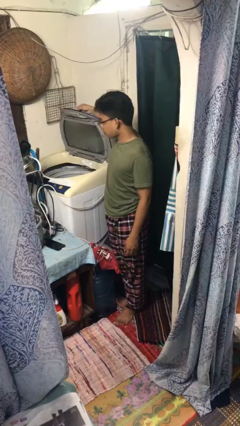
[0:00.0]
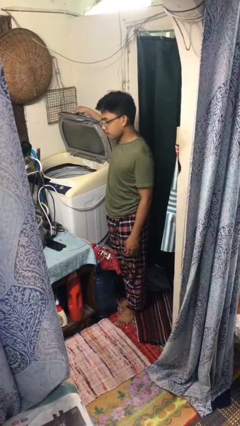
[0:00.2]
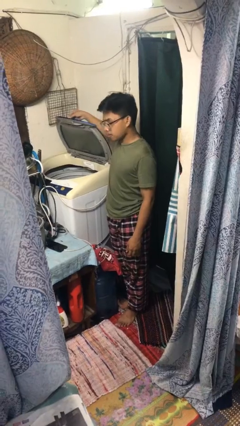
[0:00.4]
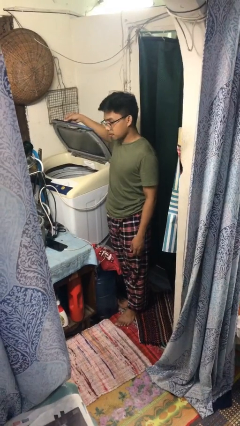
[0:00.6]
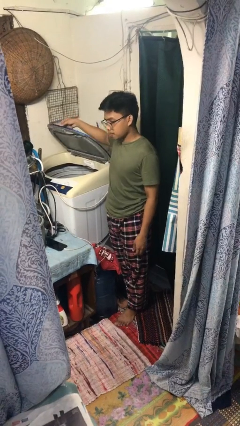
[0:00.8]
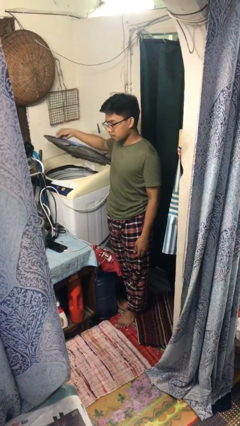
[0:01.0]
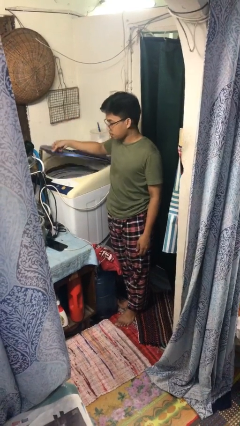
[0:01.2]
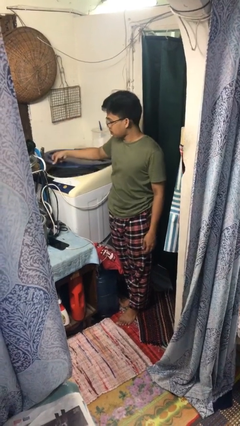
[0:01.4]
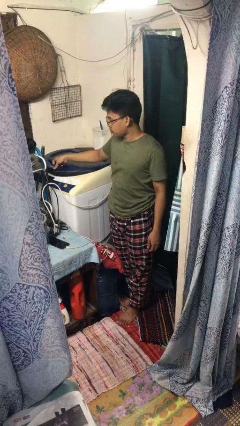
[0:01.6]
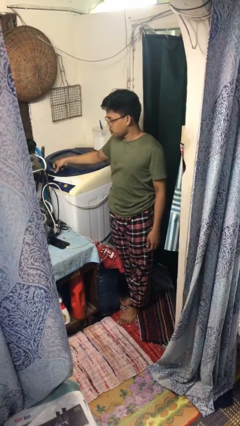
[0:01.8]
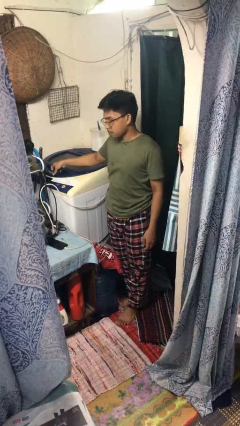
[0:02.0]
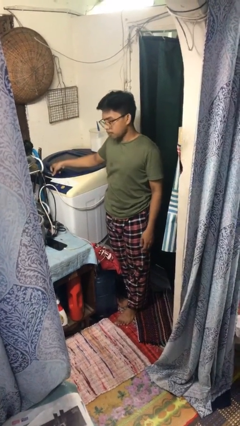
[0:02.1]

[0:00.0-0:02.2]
person closes clothes washer

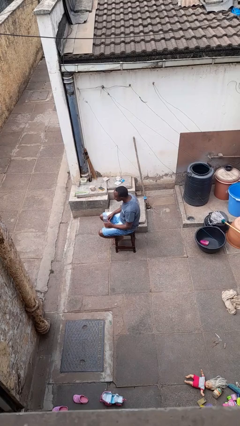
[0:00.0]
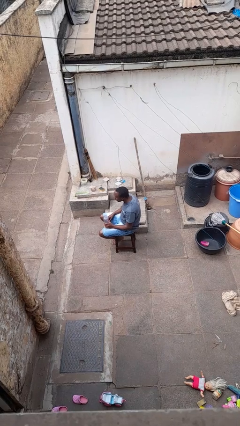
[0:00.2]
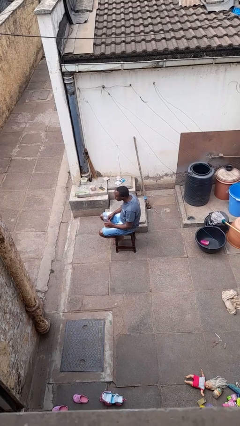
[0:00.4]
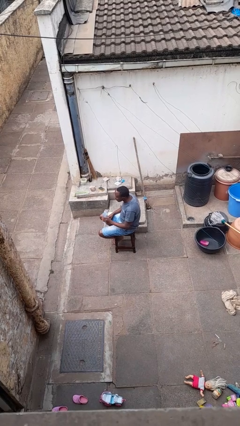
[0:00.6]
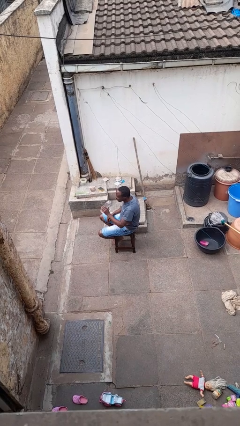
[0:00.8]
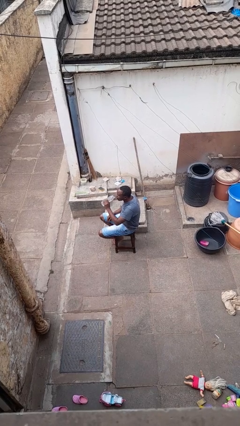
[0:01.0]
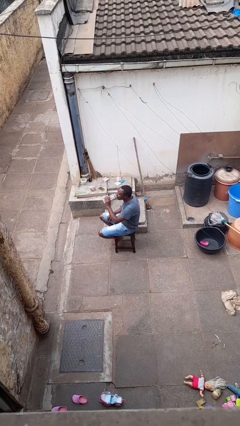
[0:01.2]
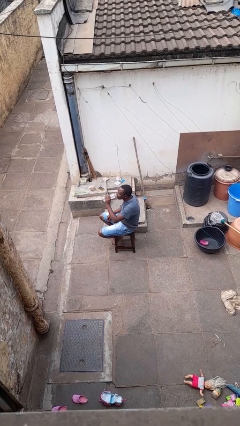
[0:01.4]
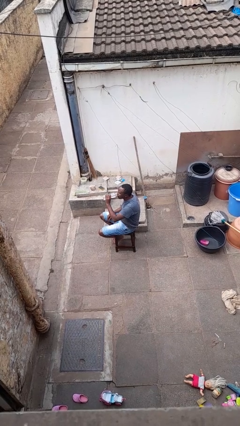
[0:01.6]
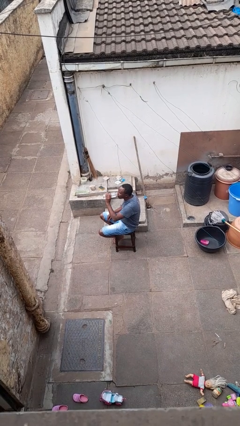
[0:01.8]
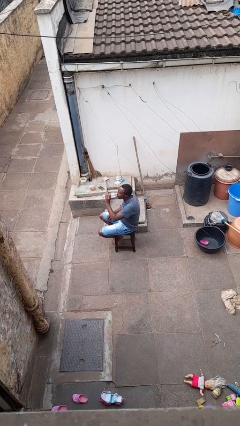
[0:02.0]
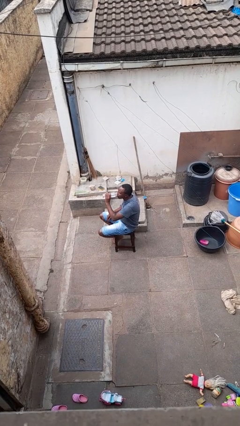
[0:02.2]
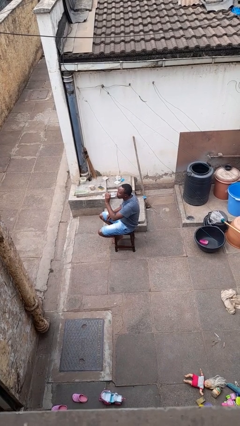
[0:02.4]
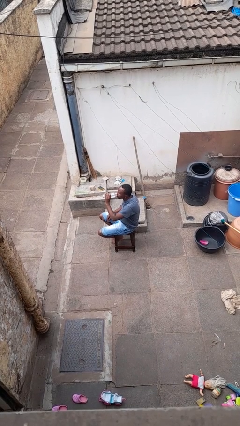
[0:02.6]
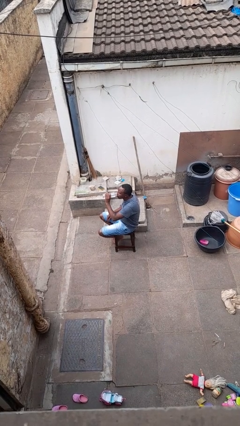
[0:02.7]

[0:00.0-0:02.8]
person drinks from bottle

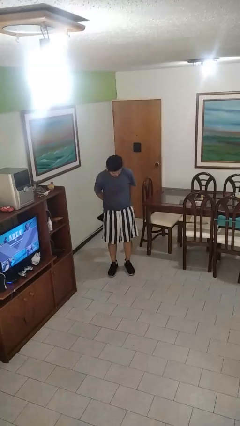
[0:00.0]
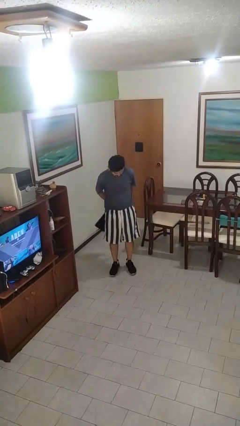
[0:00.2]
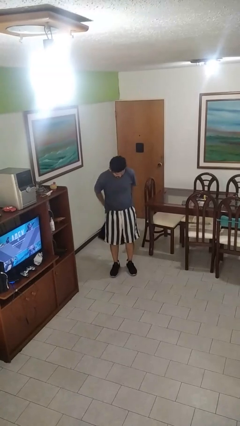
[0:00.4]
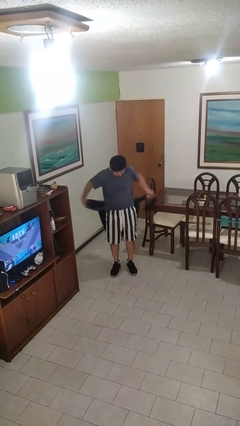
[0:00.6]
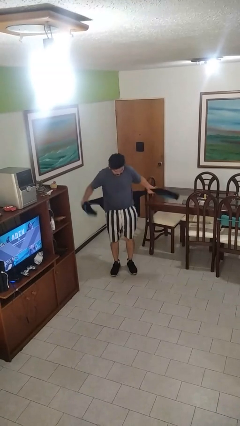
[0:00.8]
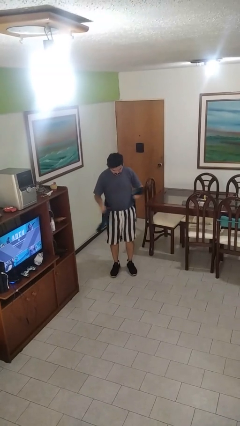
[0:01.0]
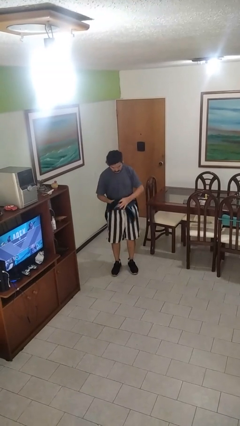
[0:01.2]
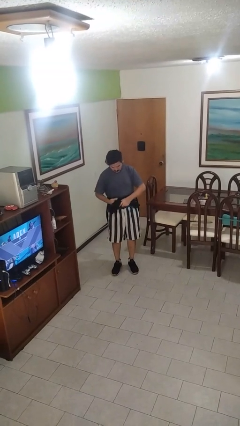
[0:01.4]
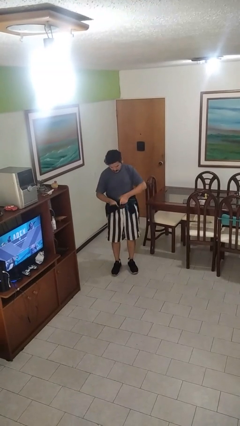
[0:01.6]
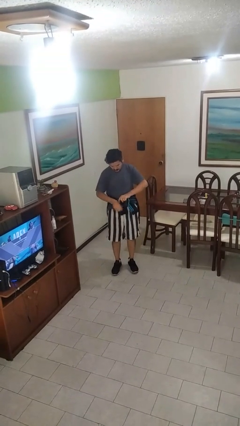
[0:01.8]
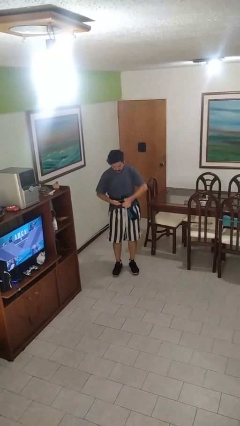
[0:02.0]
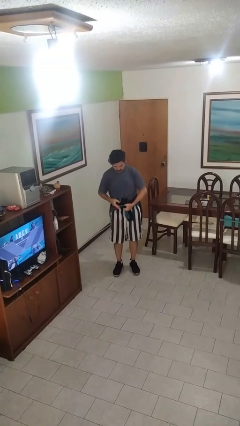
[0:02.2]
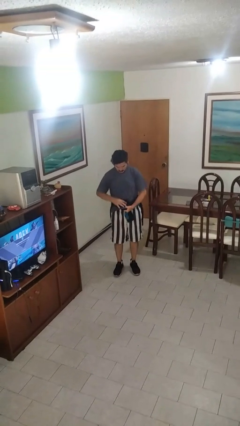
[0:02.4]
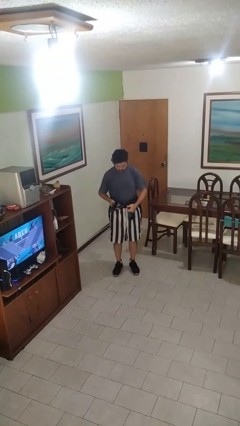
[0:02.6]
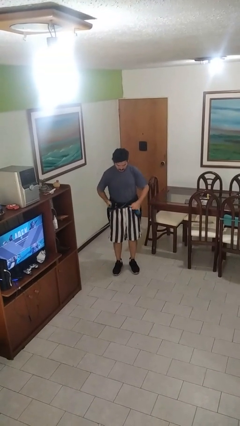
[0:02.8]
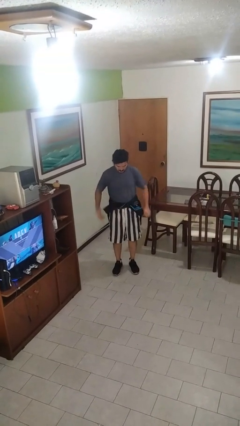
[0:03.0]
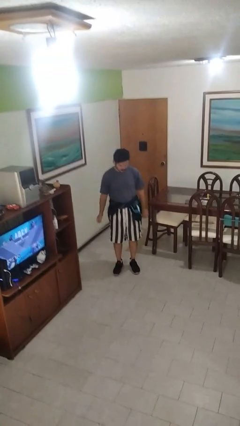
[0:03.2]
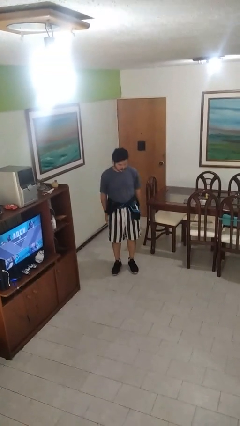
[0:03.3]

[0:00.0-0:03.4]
person ties jacket around waist

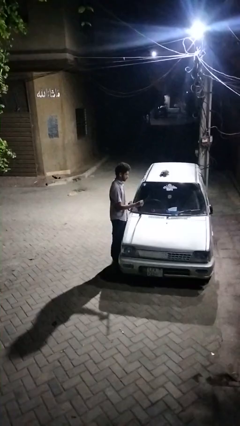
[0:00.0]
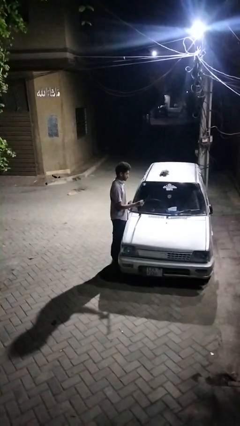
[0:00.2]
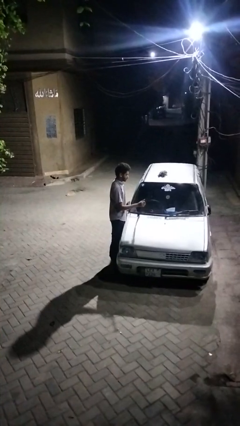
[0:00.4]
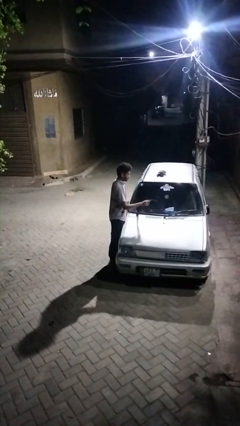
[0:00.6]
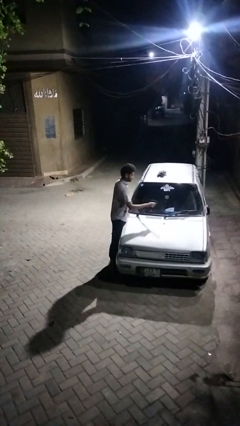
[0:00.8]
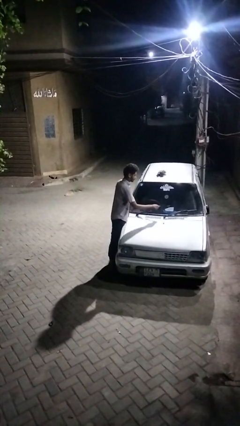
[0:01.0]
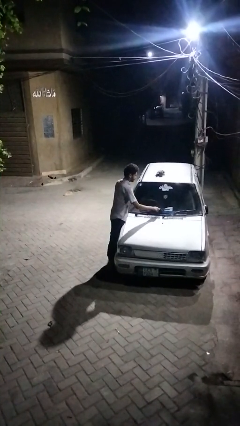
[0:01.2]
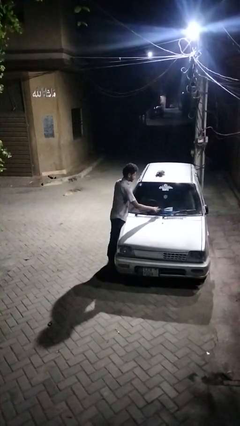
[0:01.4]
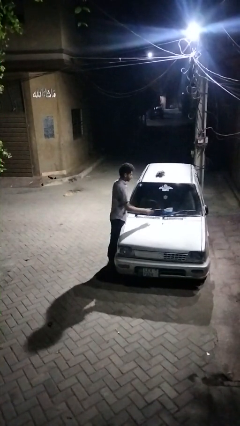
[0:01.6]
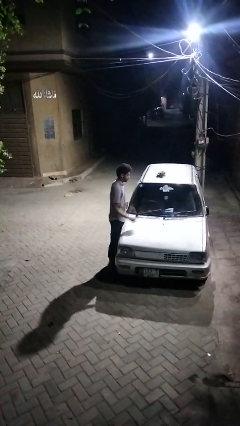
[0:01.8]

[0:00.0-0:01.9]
person flips down car wipers

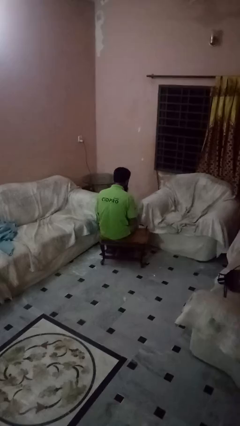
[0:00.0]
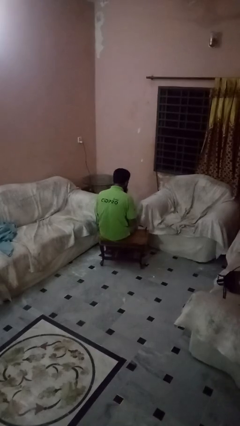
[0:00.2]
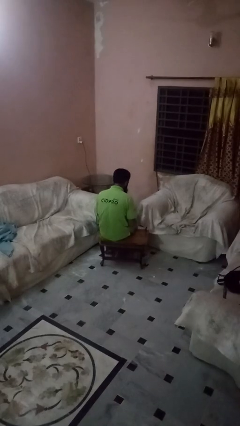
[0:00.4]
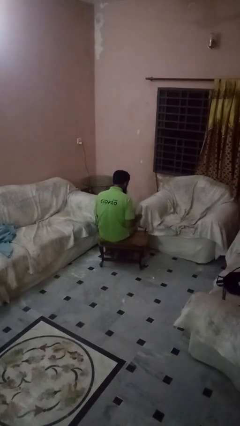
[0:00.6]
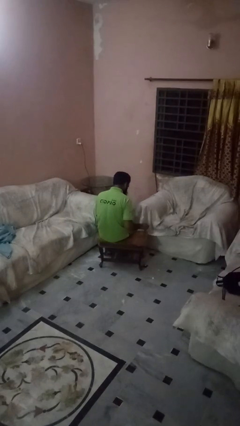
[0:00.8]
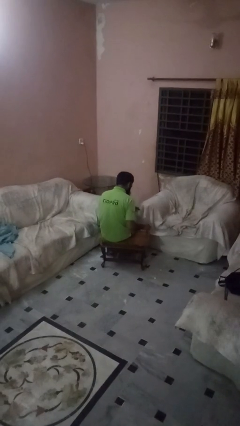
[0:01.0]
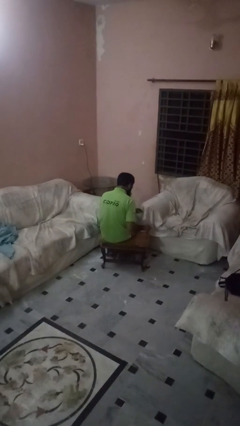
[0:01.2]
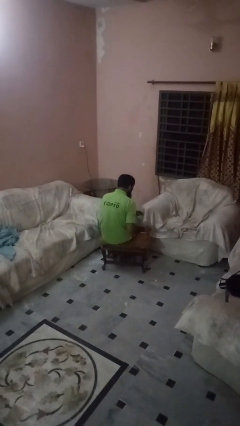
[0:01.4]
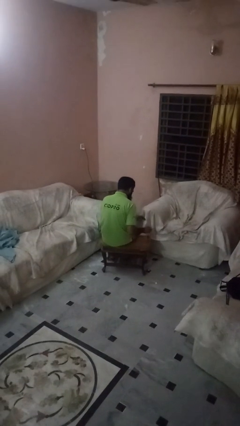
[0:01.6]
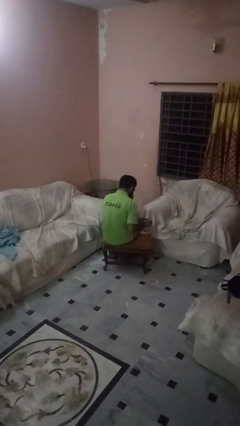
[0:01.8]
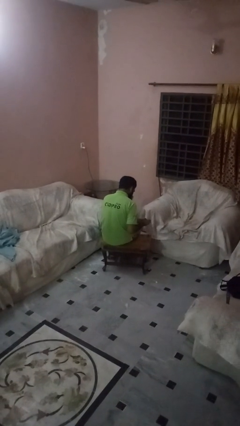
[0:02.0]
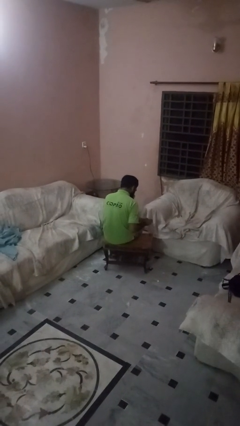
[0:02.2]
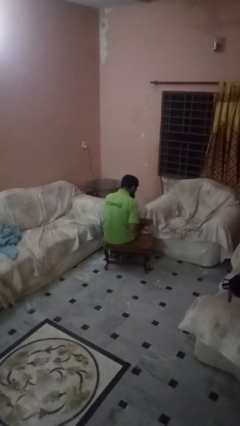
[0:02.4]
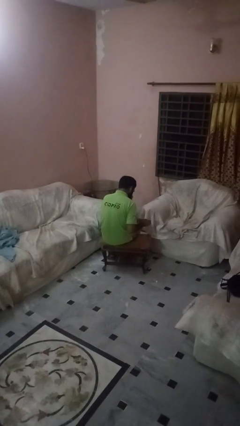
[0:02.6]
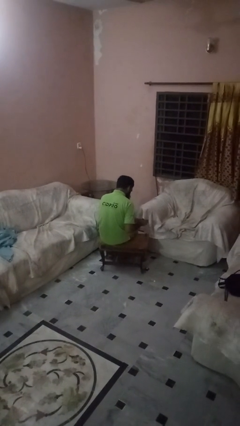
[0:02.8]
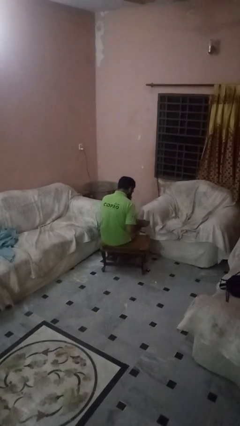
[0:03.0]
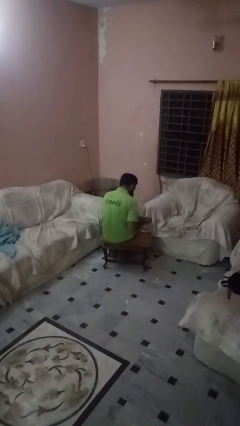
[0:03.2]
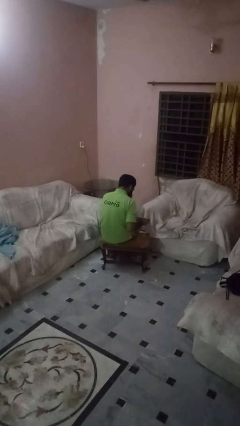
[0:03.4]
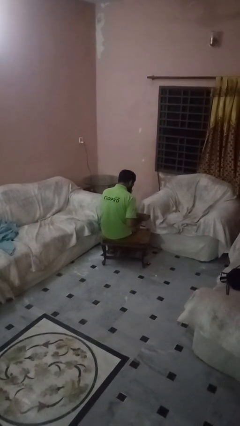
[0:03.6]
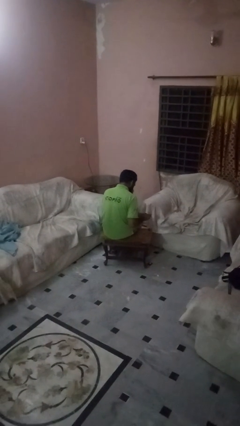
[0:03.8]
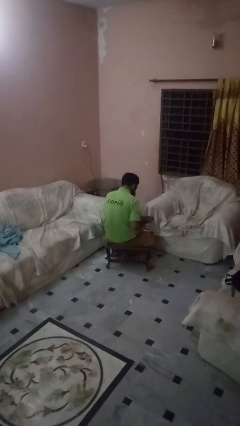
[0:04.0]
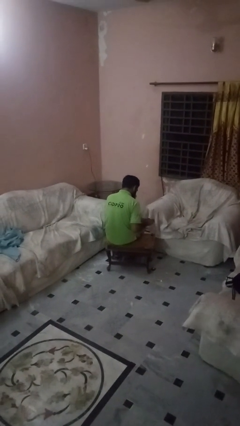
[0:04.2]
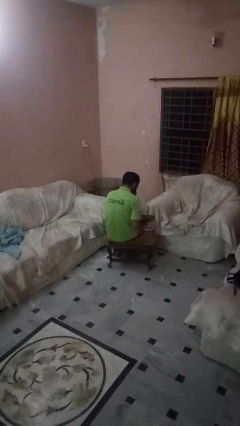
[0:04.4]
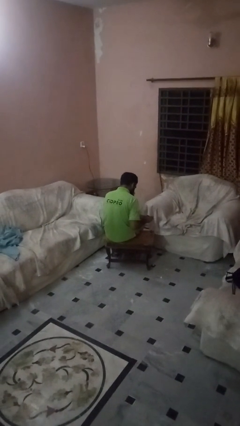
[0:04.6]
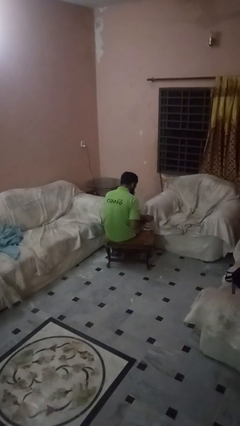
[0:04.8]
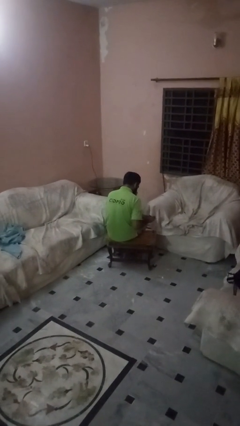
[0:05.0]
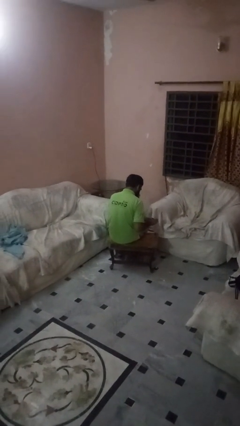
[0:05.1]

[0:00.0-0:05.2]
person paints fingernails

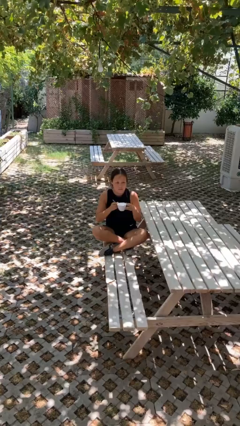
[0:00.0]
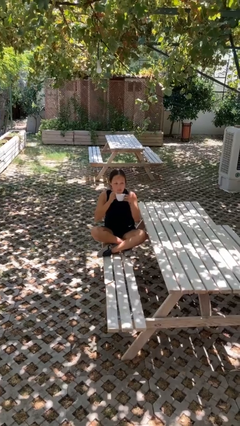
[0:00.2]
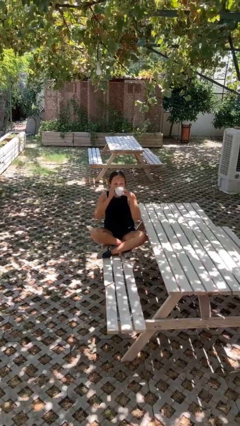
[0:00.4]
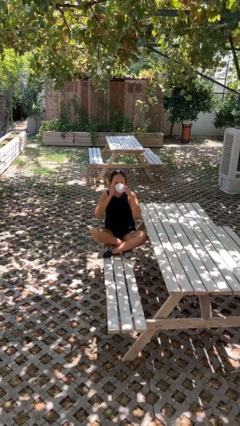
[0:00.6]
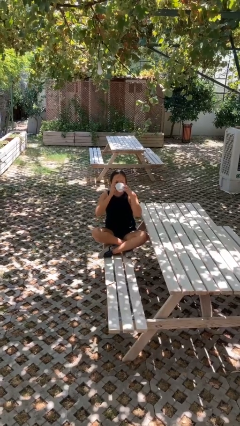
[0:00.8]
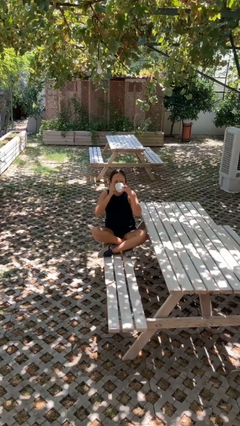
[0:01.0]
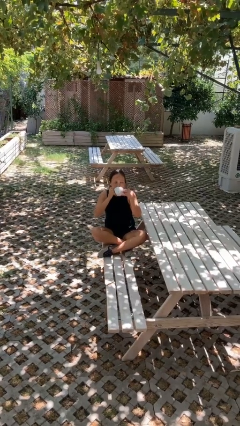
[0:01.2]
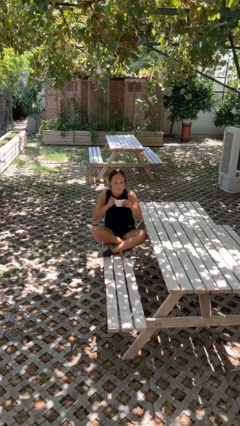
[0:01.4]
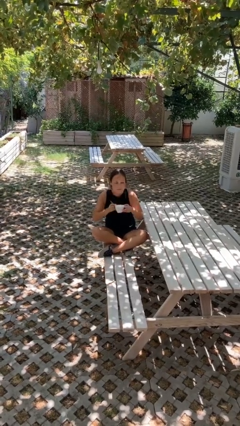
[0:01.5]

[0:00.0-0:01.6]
person drinks from mug

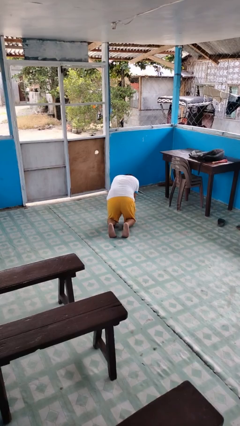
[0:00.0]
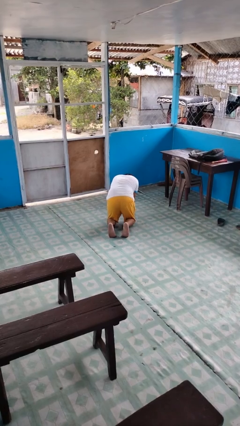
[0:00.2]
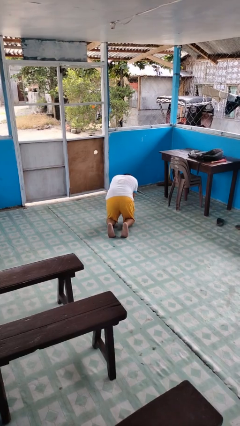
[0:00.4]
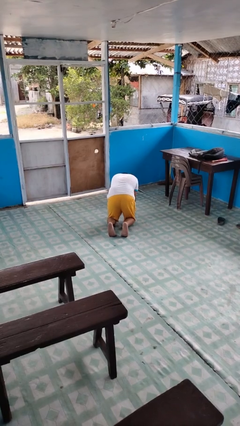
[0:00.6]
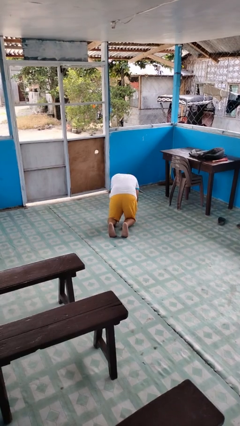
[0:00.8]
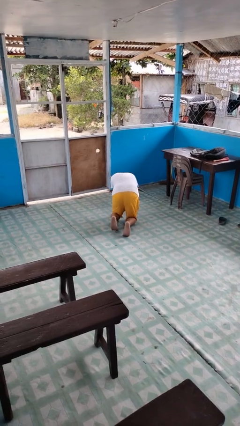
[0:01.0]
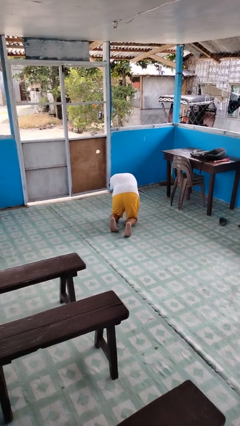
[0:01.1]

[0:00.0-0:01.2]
person crawls
